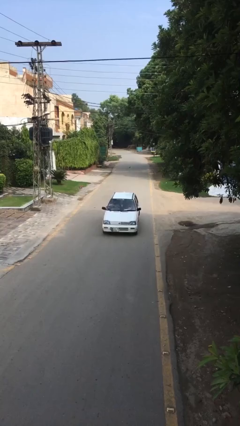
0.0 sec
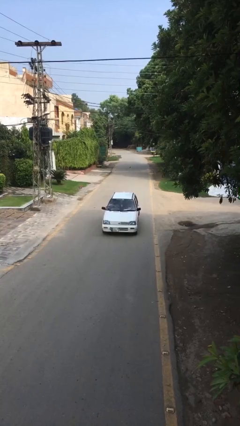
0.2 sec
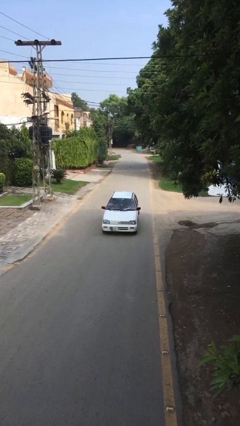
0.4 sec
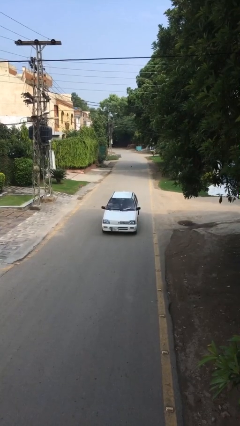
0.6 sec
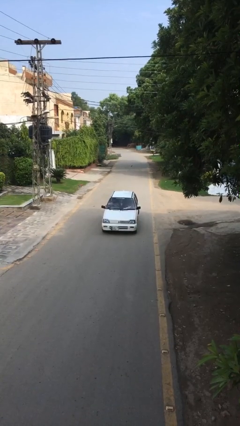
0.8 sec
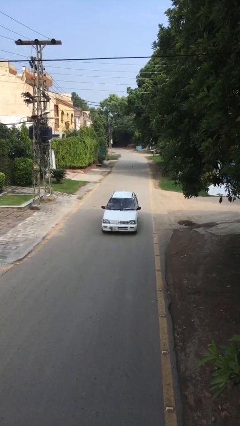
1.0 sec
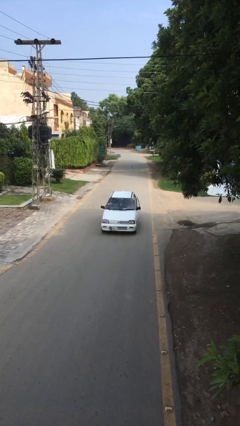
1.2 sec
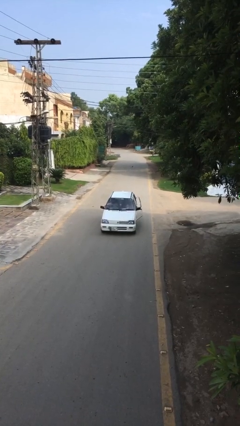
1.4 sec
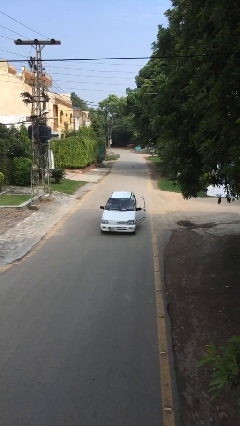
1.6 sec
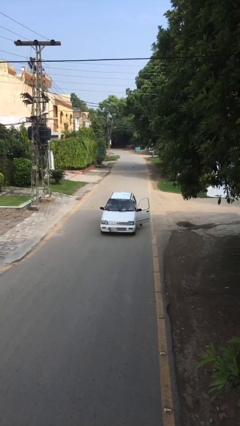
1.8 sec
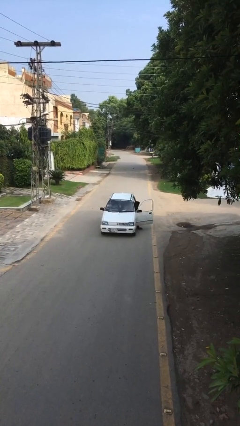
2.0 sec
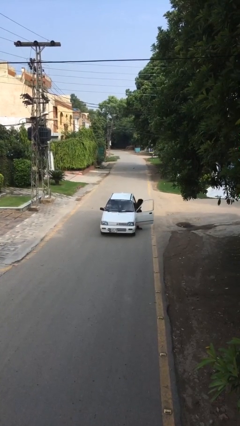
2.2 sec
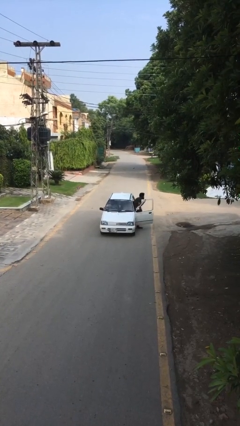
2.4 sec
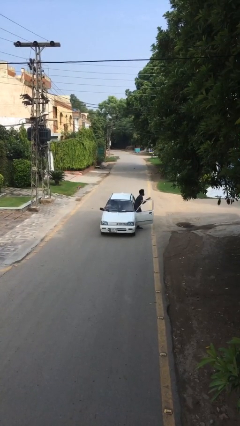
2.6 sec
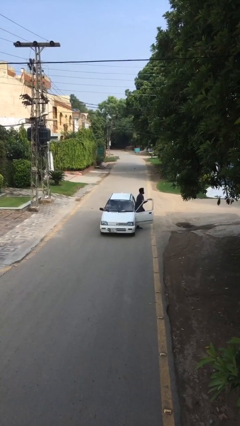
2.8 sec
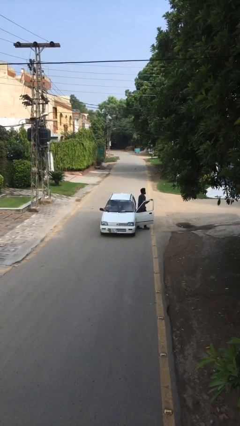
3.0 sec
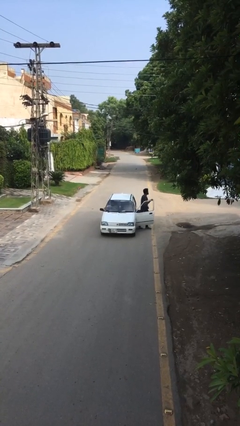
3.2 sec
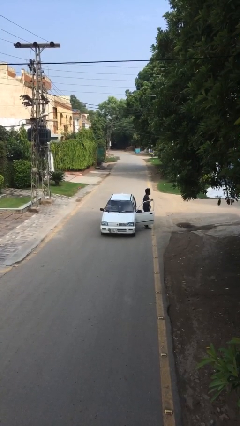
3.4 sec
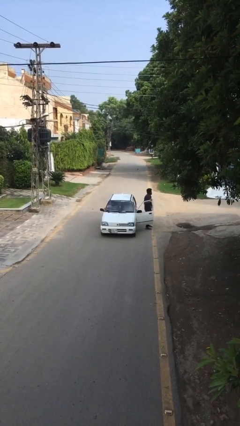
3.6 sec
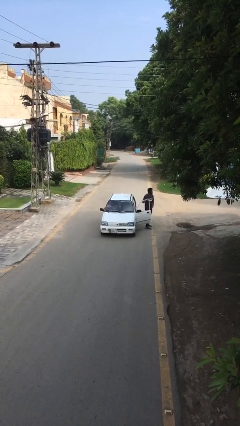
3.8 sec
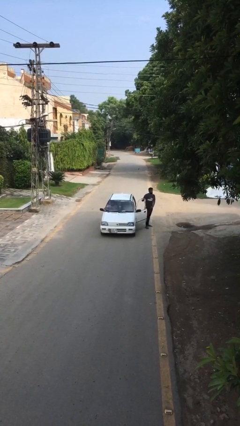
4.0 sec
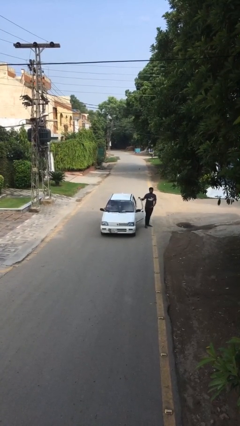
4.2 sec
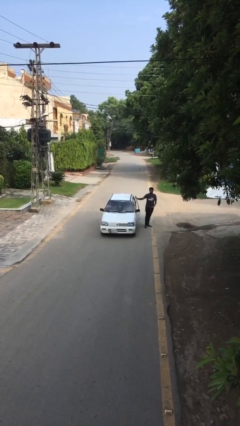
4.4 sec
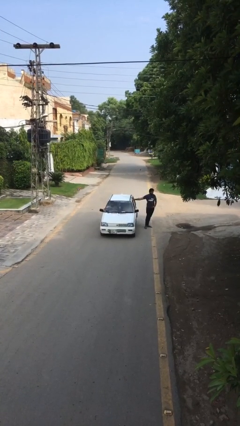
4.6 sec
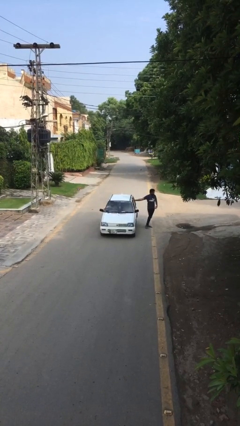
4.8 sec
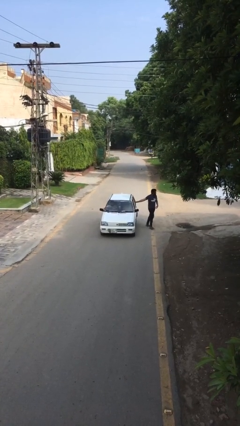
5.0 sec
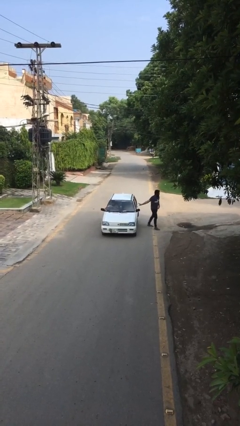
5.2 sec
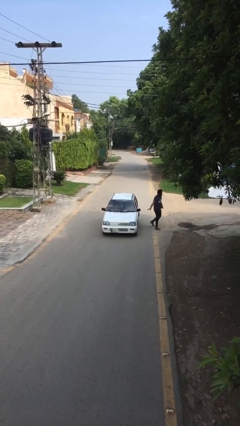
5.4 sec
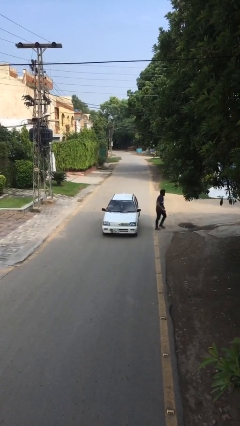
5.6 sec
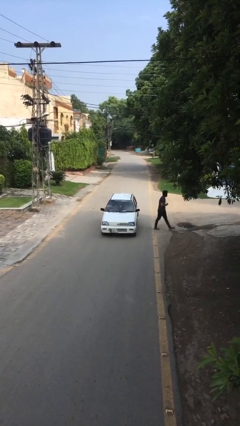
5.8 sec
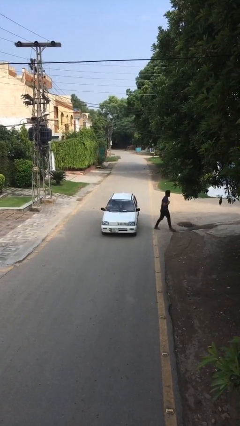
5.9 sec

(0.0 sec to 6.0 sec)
car drops off person

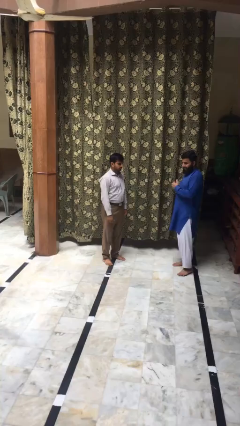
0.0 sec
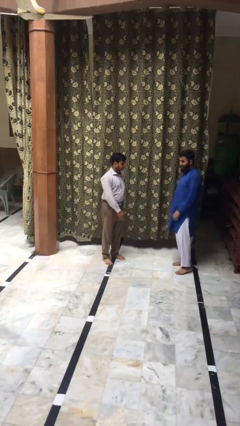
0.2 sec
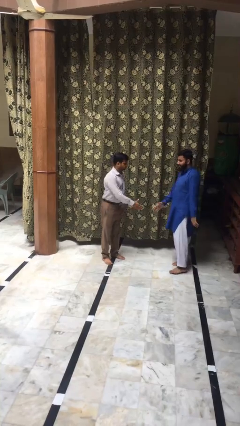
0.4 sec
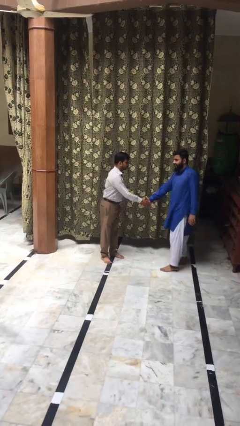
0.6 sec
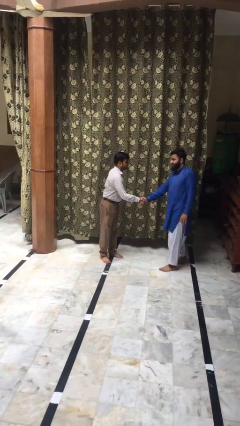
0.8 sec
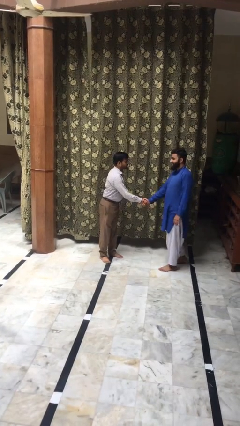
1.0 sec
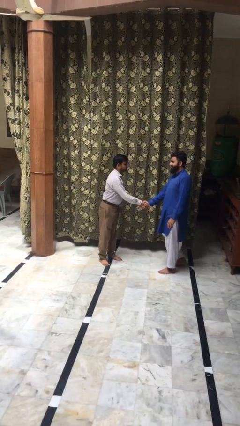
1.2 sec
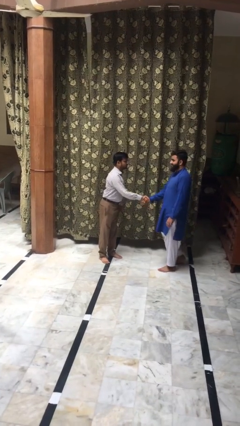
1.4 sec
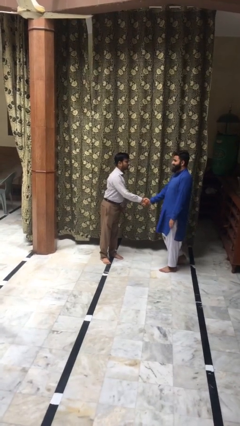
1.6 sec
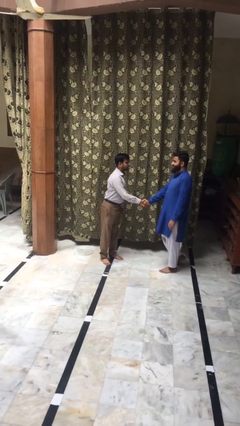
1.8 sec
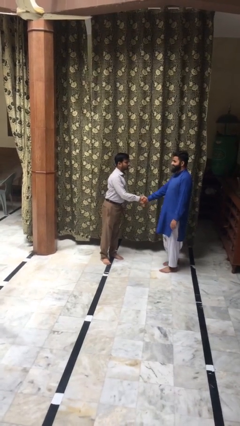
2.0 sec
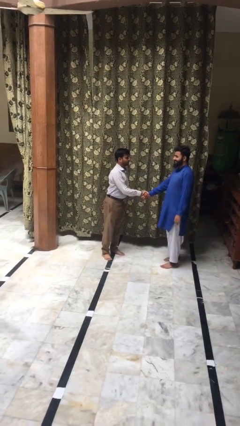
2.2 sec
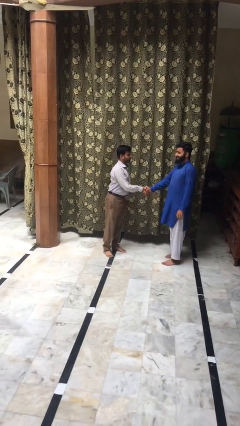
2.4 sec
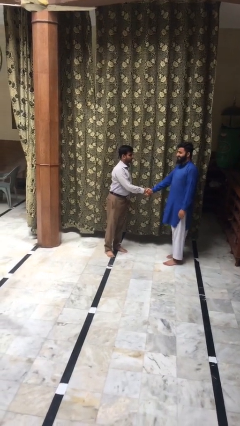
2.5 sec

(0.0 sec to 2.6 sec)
person shakes hand

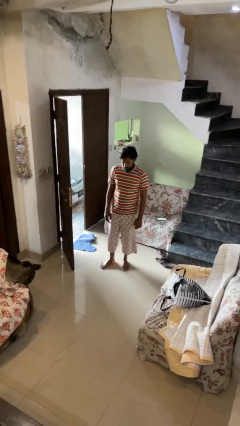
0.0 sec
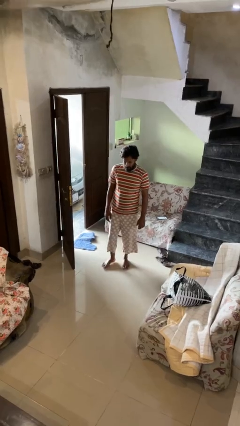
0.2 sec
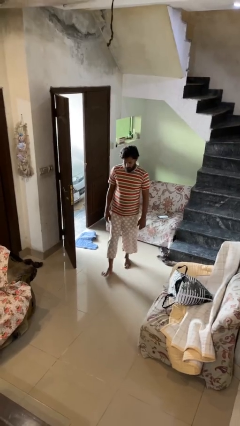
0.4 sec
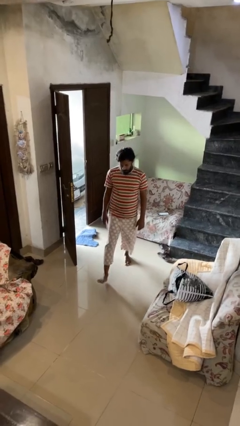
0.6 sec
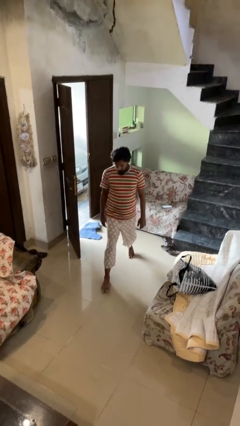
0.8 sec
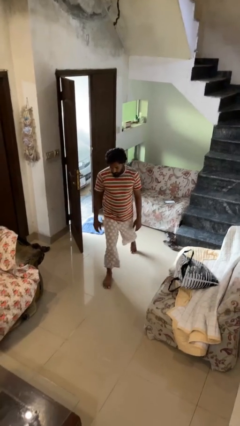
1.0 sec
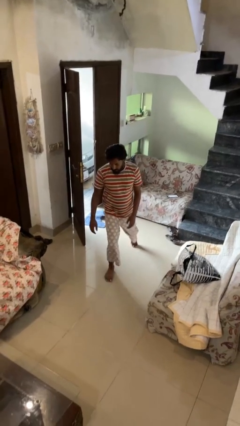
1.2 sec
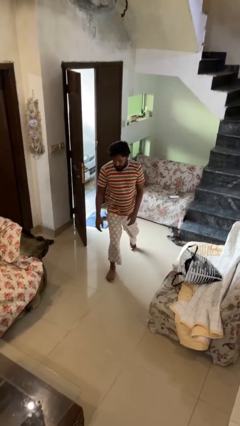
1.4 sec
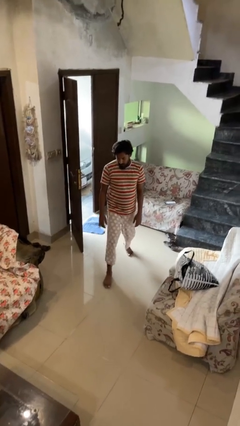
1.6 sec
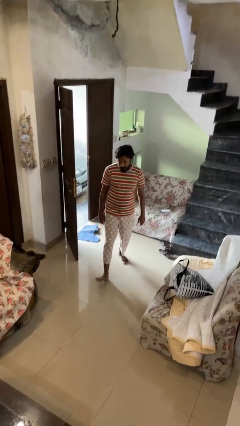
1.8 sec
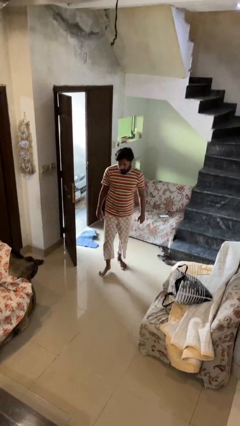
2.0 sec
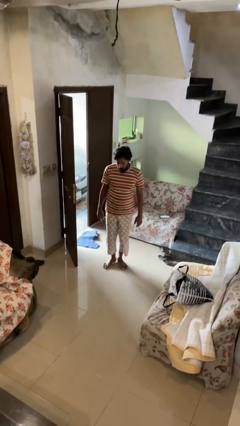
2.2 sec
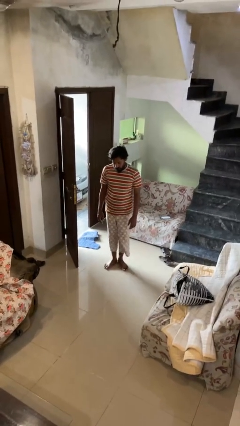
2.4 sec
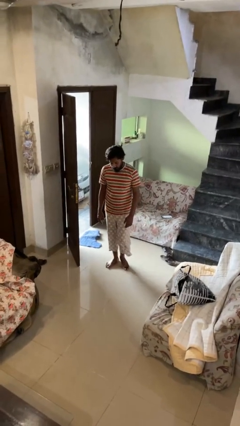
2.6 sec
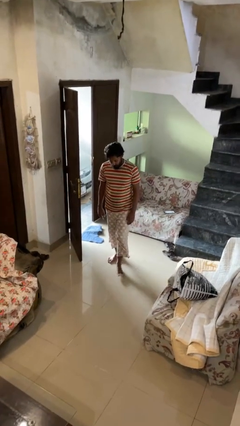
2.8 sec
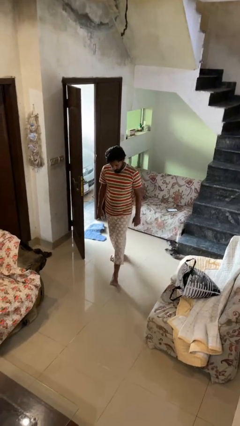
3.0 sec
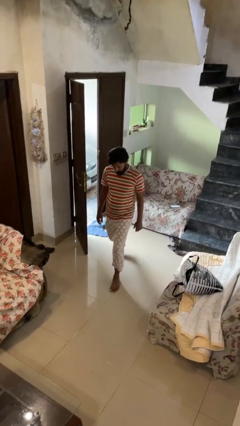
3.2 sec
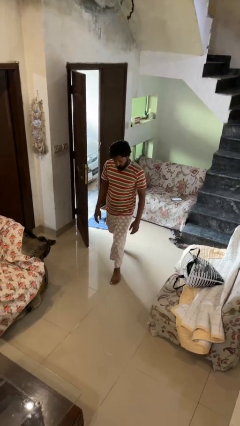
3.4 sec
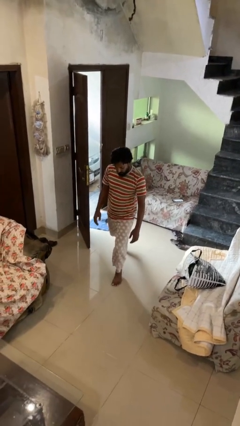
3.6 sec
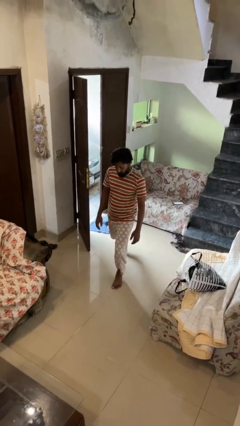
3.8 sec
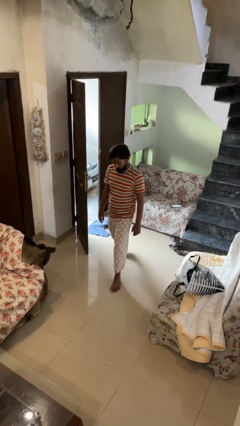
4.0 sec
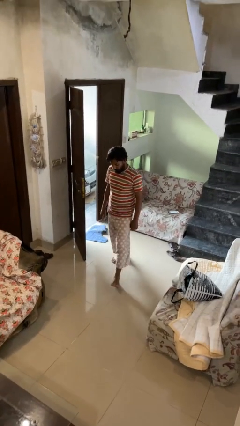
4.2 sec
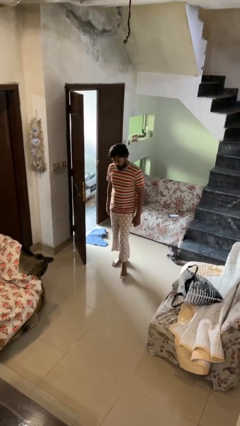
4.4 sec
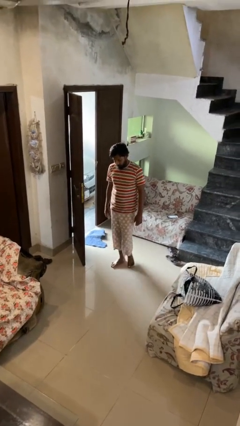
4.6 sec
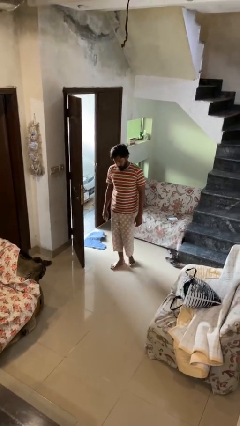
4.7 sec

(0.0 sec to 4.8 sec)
person exercises with lunges

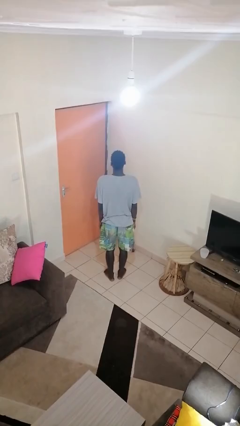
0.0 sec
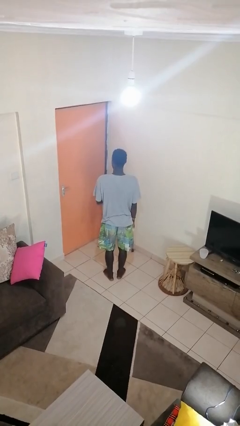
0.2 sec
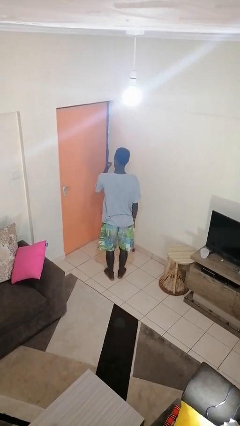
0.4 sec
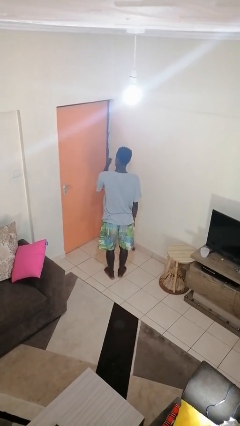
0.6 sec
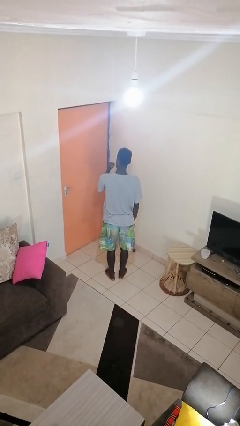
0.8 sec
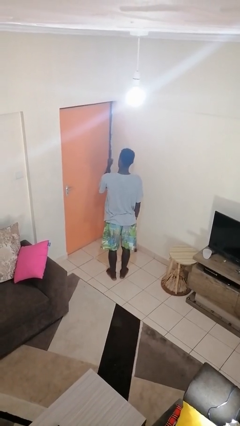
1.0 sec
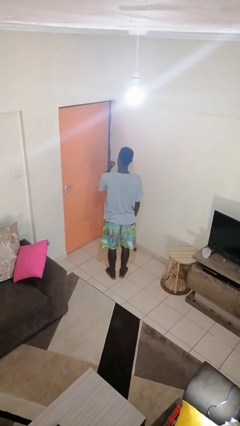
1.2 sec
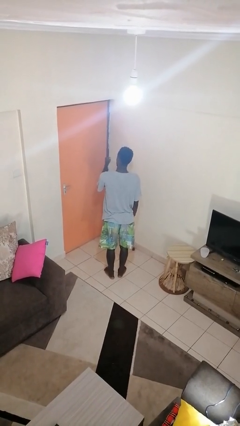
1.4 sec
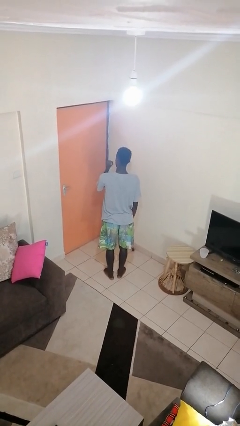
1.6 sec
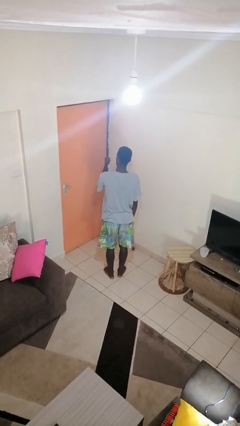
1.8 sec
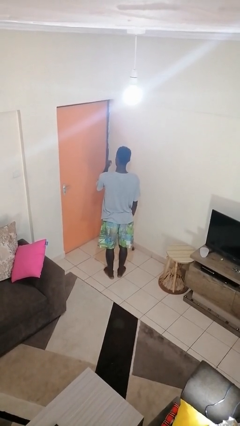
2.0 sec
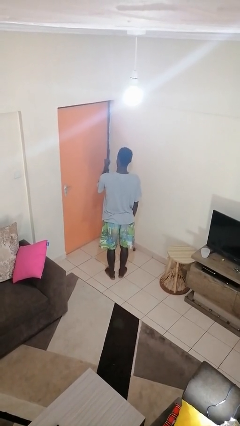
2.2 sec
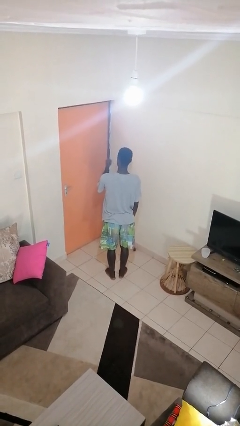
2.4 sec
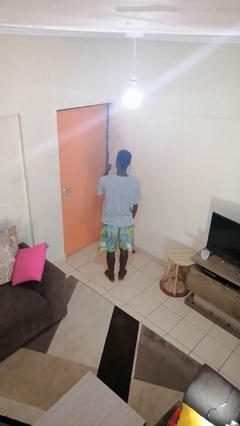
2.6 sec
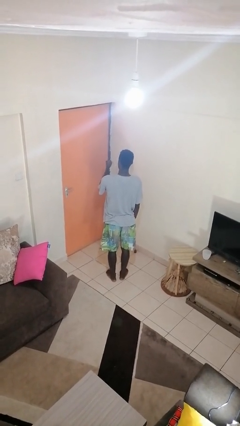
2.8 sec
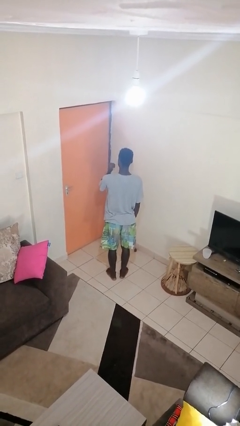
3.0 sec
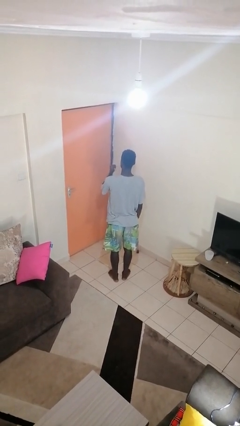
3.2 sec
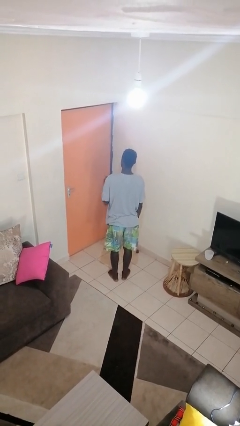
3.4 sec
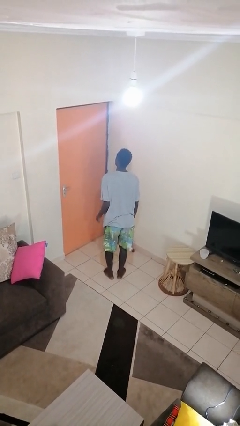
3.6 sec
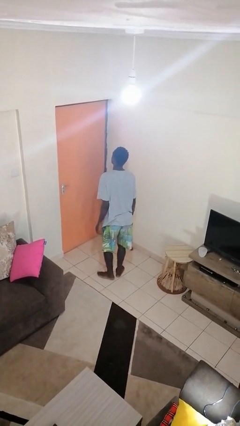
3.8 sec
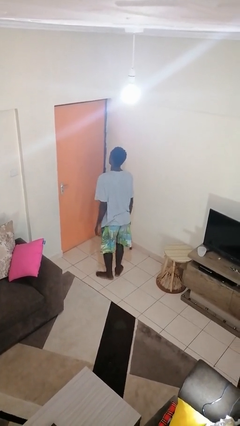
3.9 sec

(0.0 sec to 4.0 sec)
person gestures behind me

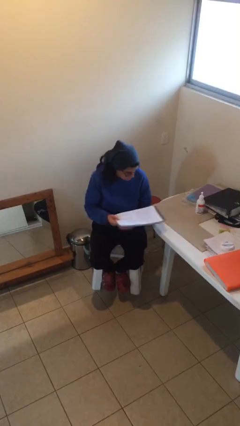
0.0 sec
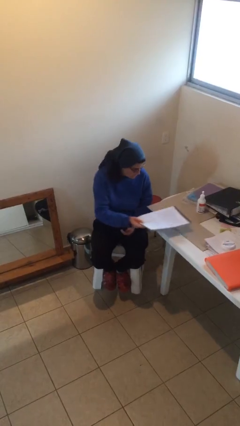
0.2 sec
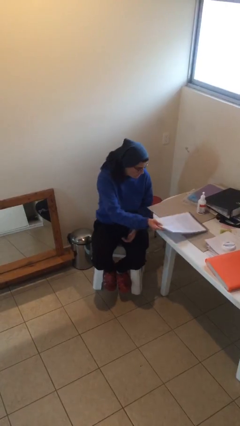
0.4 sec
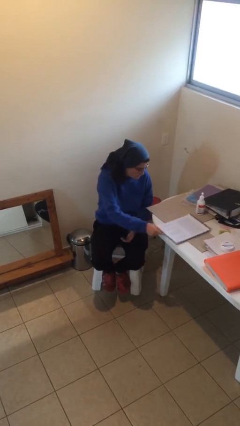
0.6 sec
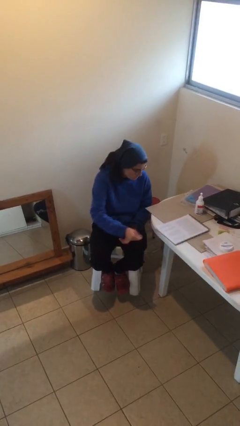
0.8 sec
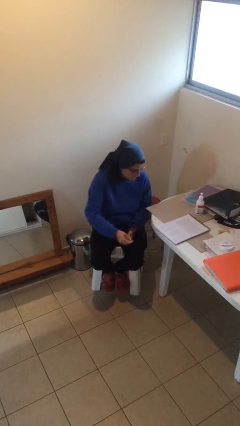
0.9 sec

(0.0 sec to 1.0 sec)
person puts down object on table
